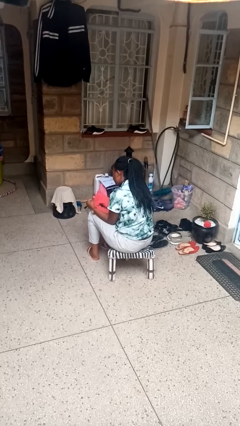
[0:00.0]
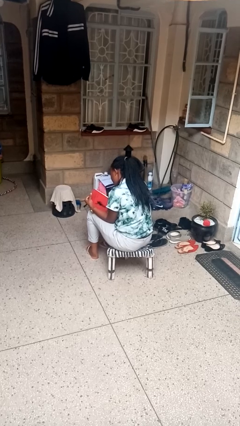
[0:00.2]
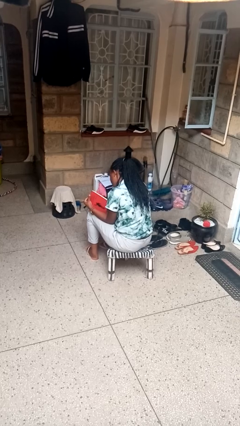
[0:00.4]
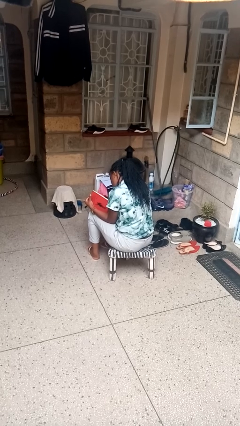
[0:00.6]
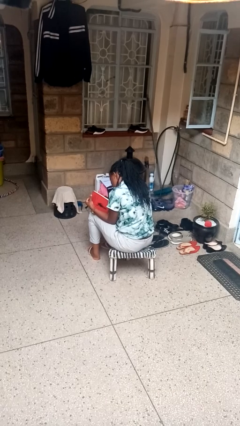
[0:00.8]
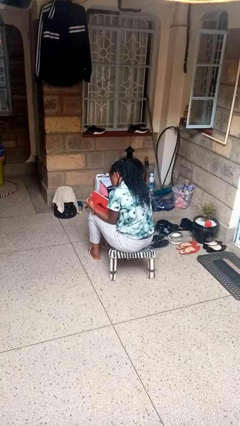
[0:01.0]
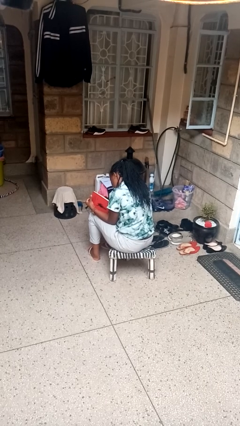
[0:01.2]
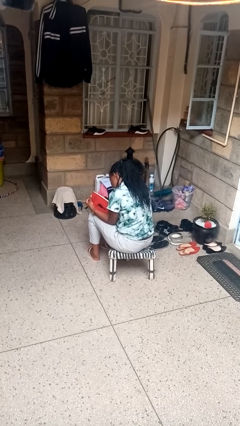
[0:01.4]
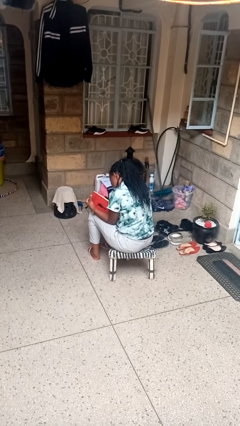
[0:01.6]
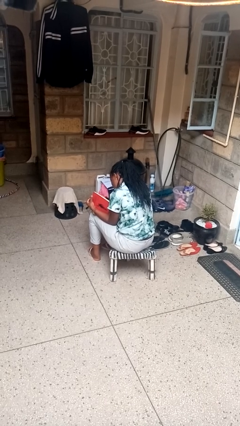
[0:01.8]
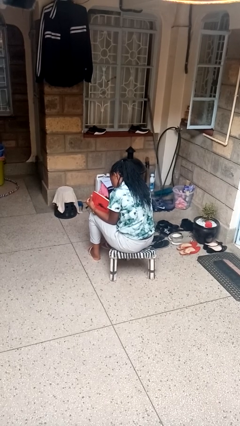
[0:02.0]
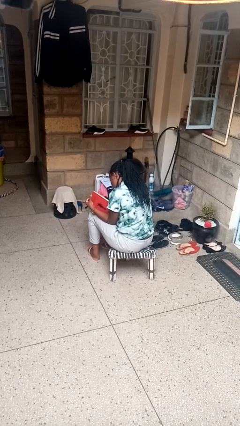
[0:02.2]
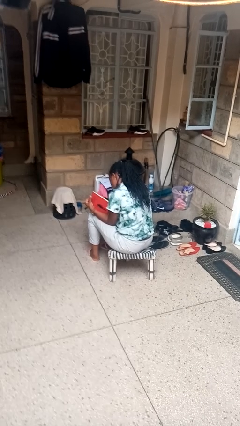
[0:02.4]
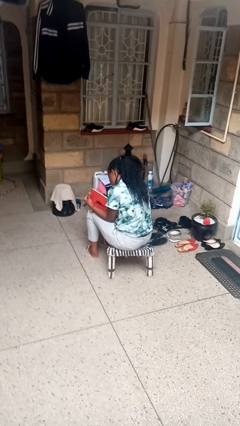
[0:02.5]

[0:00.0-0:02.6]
person reads book

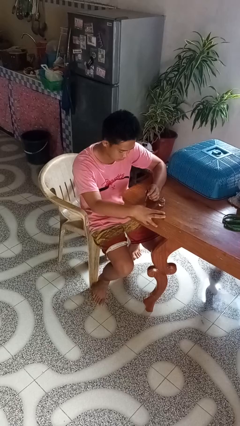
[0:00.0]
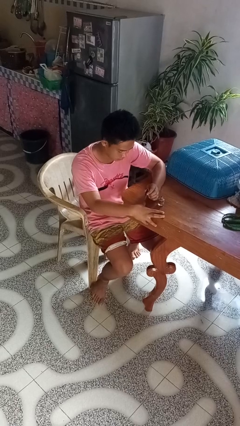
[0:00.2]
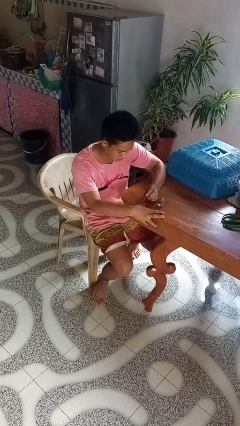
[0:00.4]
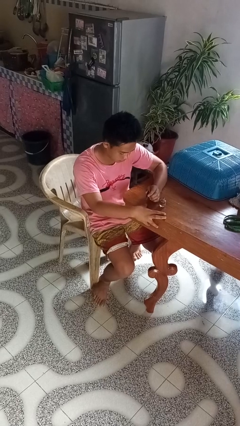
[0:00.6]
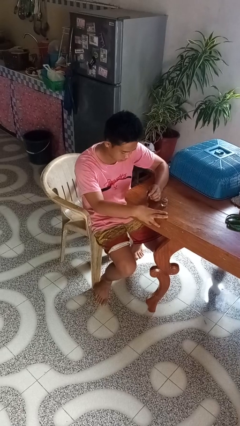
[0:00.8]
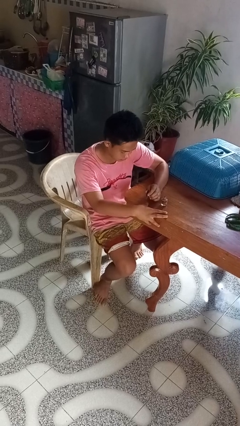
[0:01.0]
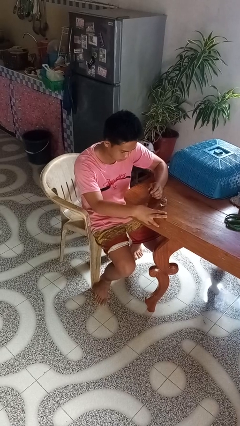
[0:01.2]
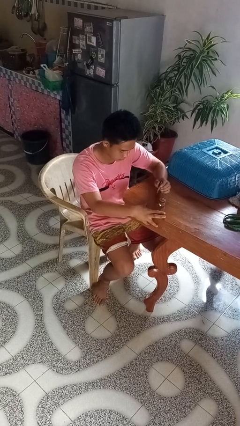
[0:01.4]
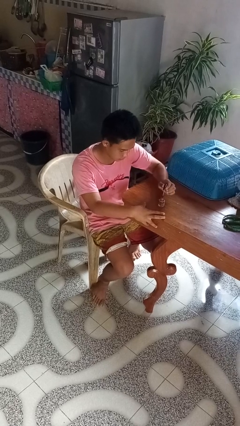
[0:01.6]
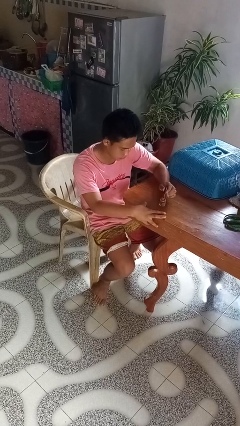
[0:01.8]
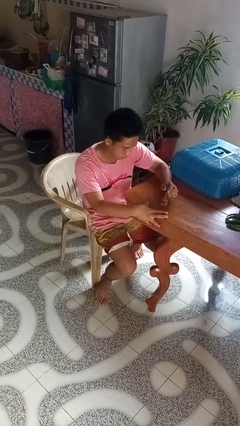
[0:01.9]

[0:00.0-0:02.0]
person paints fingernails

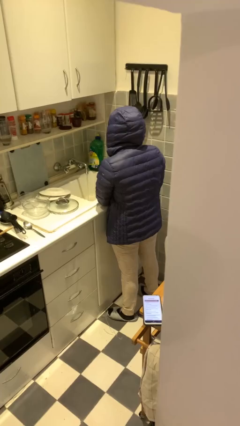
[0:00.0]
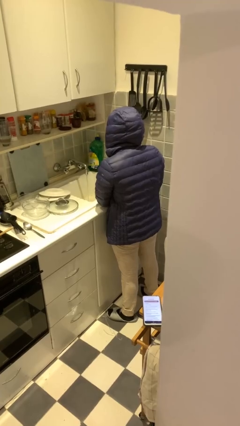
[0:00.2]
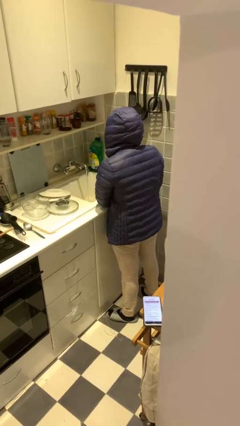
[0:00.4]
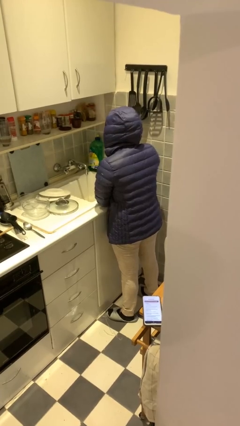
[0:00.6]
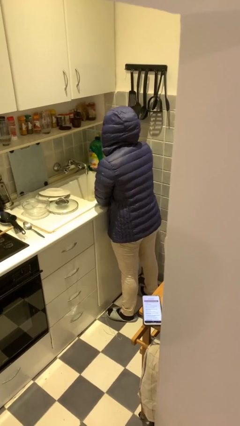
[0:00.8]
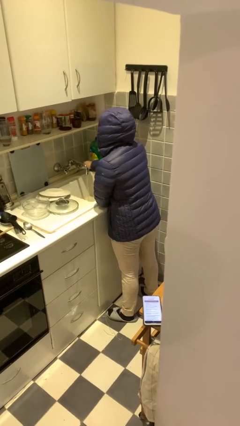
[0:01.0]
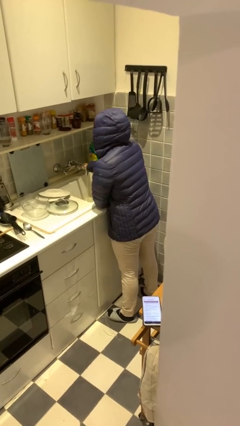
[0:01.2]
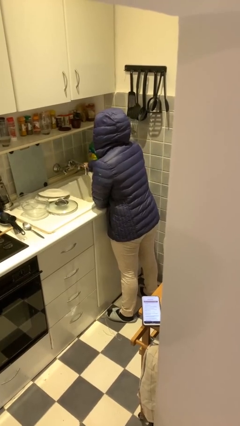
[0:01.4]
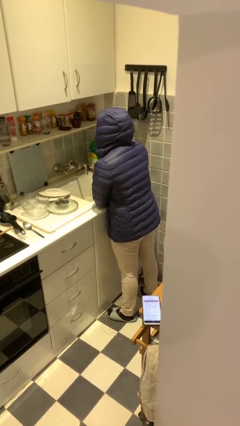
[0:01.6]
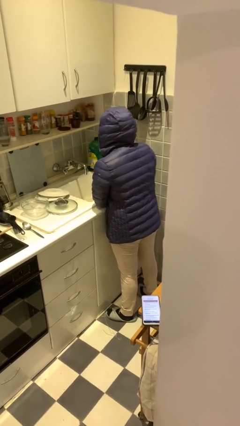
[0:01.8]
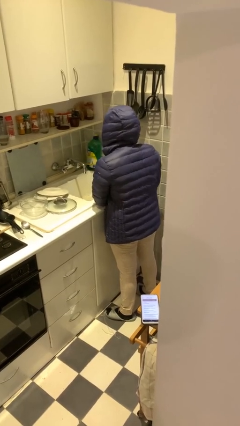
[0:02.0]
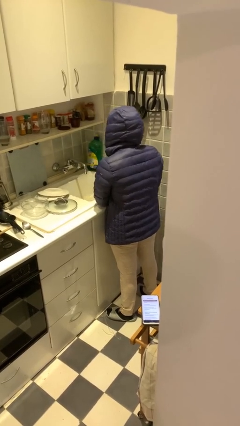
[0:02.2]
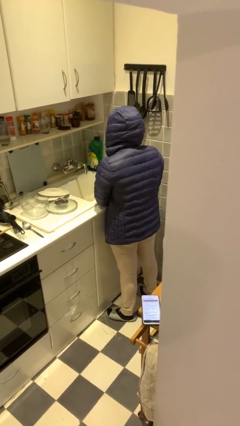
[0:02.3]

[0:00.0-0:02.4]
person turns off faucet

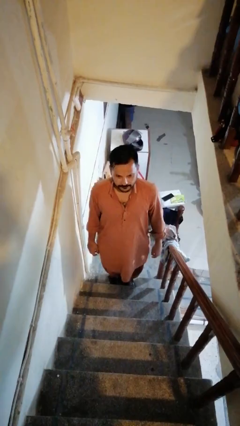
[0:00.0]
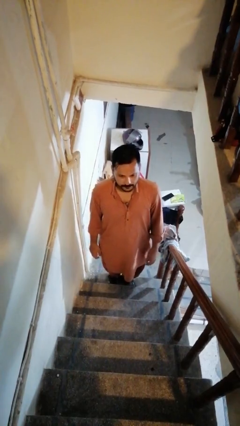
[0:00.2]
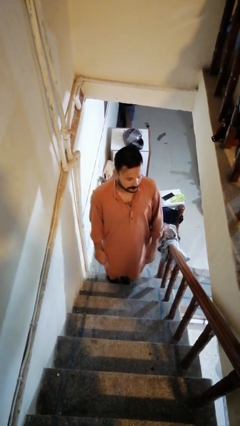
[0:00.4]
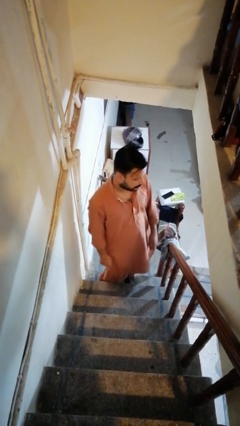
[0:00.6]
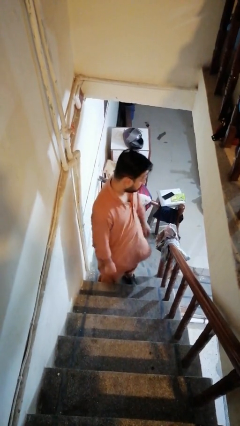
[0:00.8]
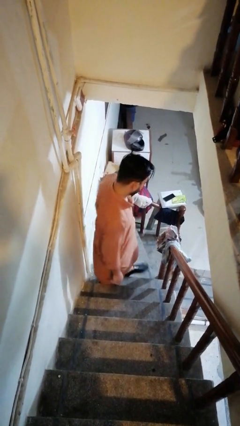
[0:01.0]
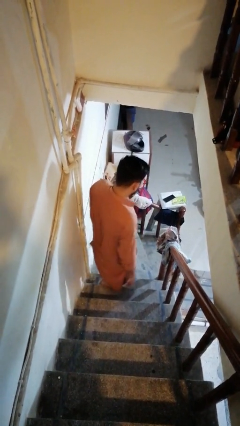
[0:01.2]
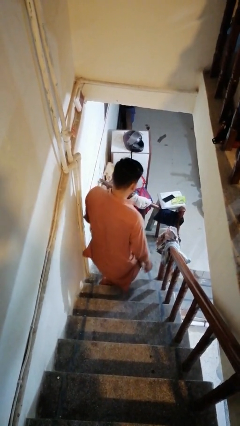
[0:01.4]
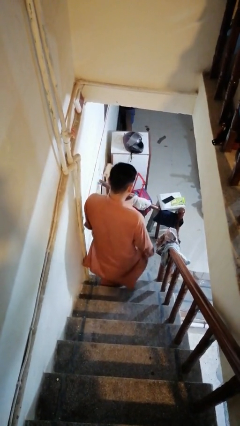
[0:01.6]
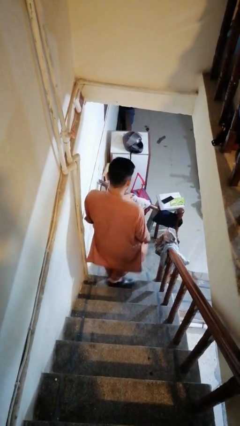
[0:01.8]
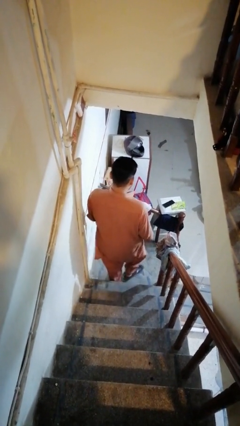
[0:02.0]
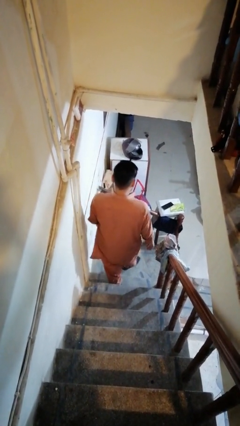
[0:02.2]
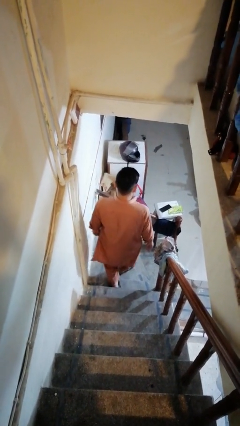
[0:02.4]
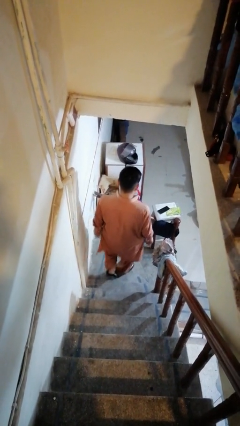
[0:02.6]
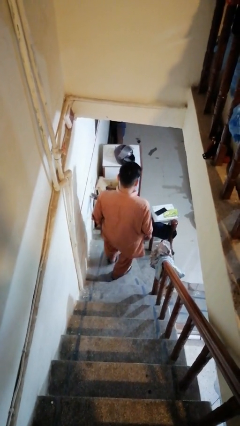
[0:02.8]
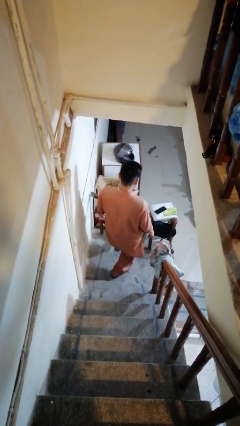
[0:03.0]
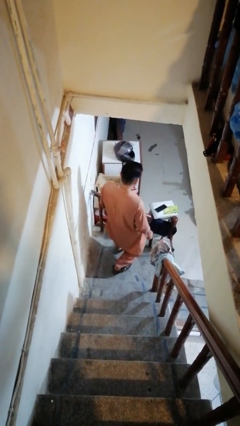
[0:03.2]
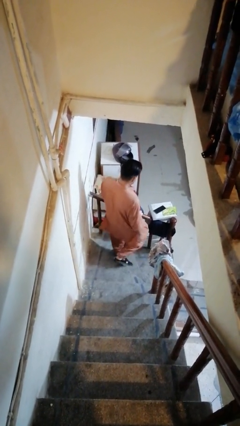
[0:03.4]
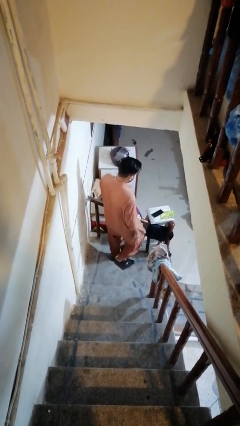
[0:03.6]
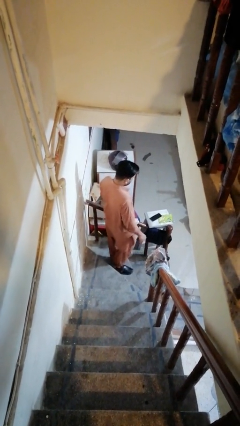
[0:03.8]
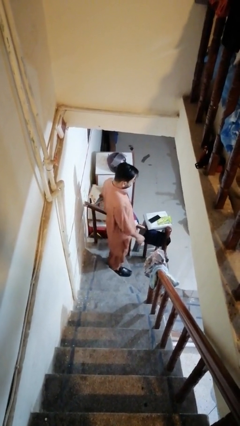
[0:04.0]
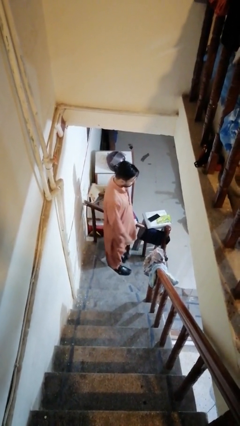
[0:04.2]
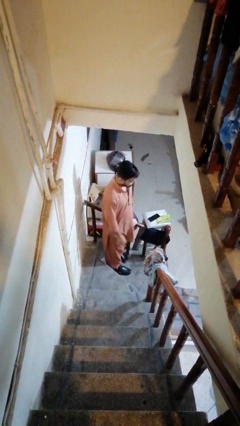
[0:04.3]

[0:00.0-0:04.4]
person climbs down stairs

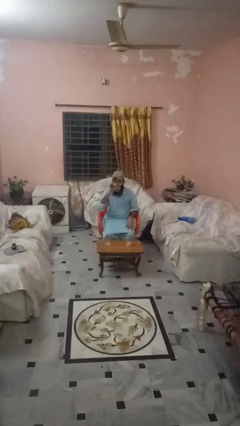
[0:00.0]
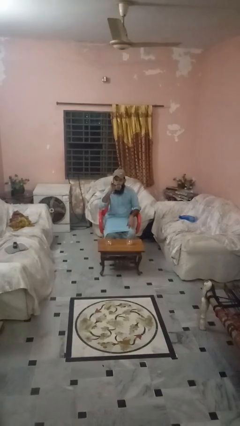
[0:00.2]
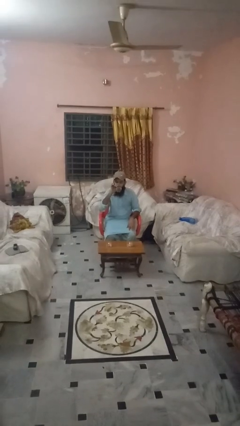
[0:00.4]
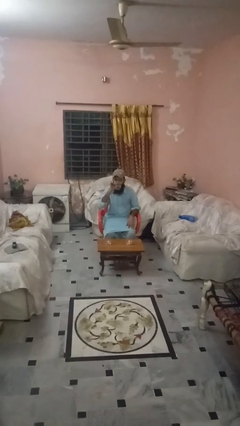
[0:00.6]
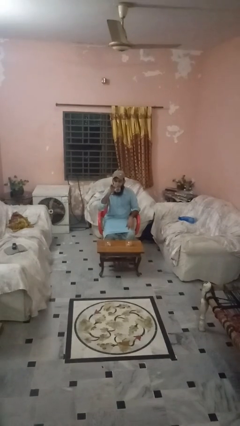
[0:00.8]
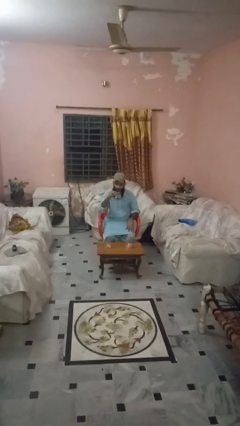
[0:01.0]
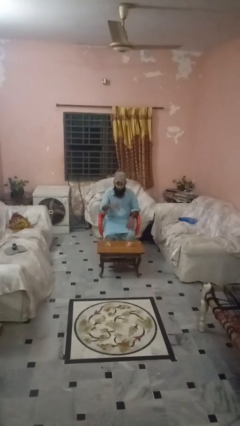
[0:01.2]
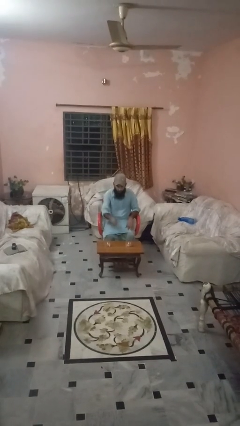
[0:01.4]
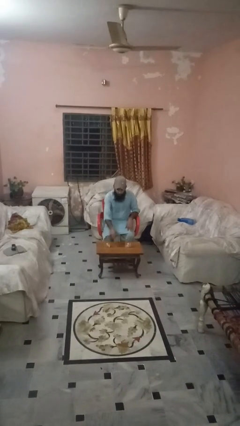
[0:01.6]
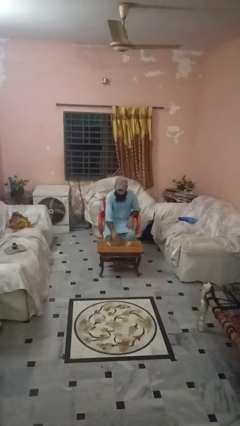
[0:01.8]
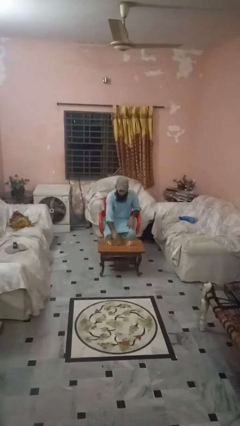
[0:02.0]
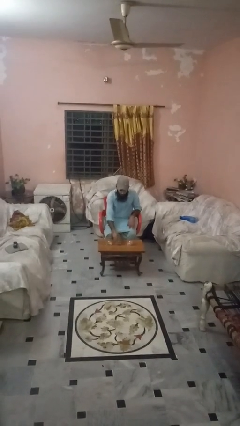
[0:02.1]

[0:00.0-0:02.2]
person puts down object on table

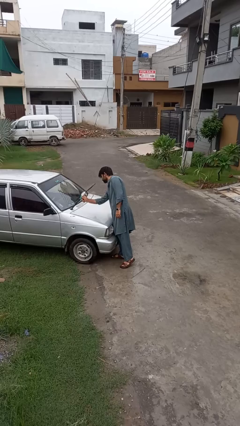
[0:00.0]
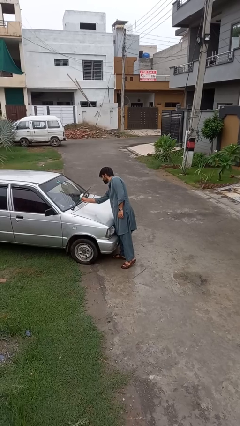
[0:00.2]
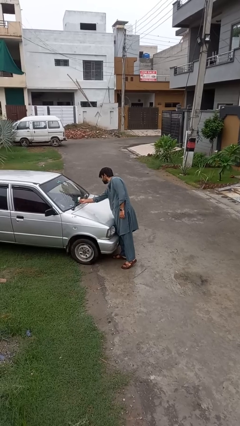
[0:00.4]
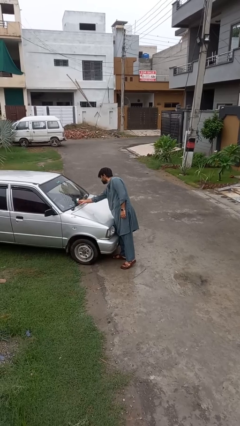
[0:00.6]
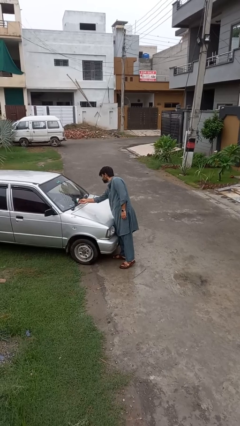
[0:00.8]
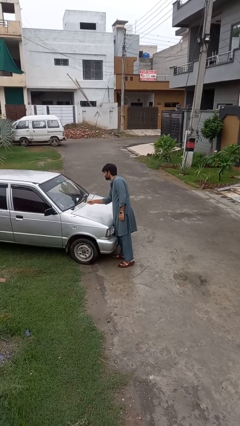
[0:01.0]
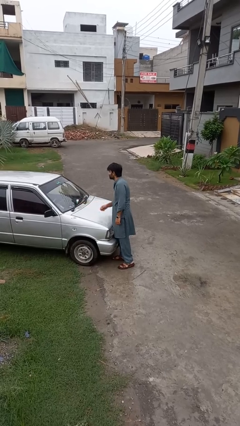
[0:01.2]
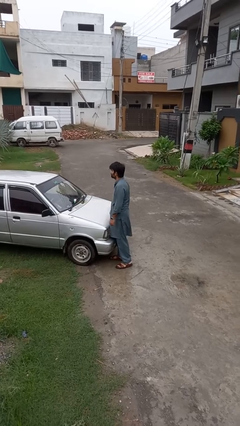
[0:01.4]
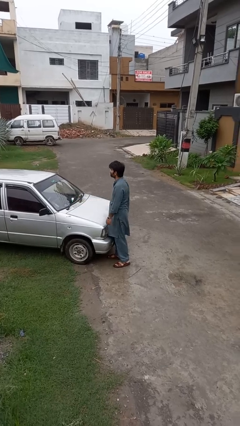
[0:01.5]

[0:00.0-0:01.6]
person flips down car wipers

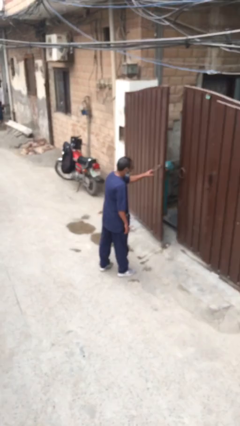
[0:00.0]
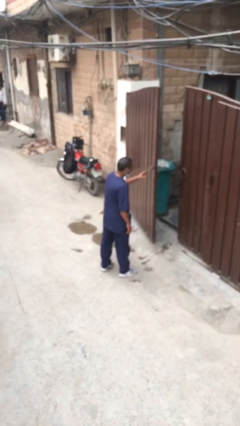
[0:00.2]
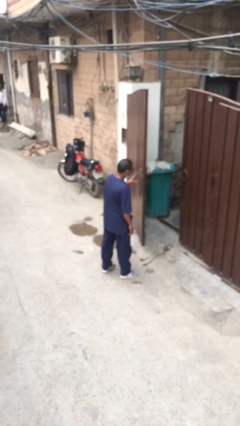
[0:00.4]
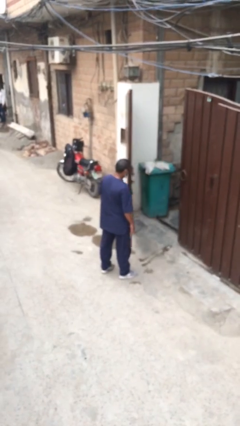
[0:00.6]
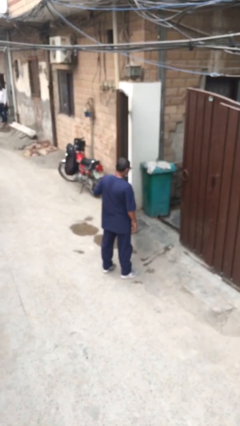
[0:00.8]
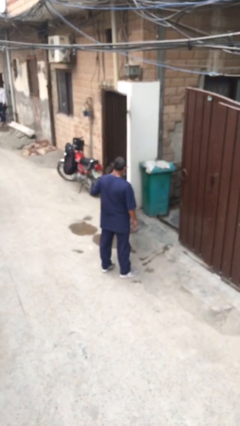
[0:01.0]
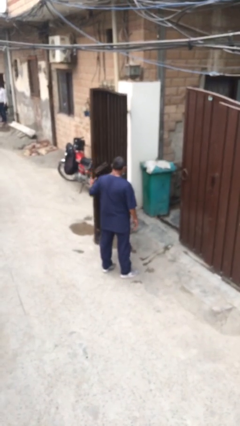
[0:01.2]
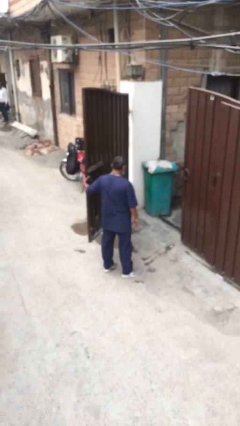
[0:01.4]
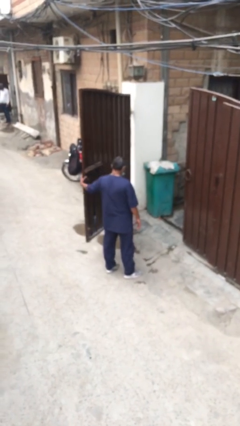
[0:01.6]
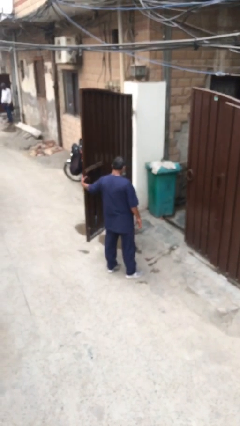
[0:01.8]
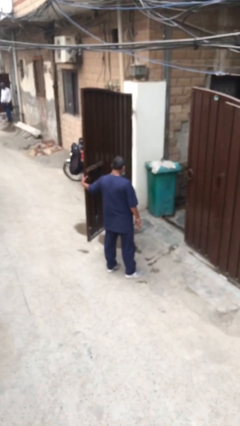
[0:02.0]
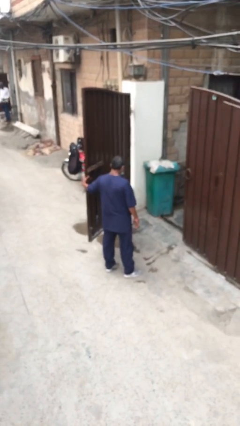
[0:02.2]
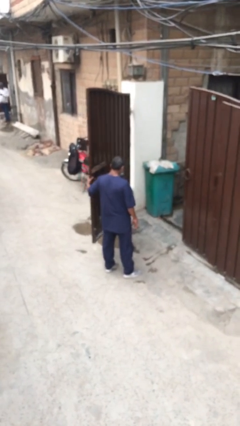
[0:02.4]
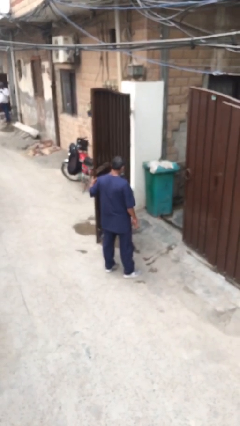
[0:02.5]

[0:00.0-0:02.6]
person opens facility door
